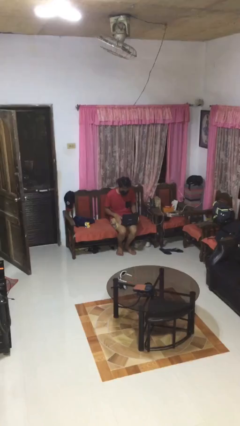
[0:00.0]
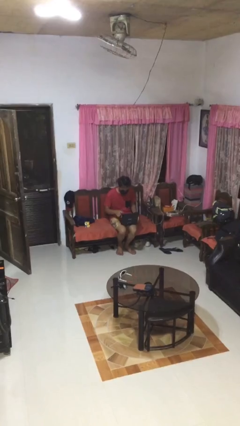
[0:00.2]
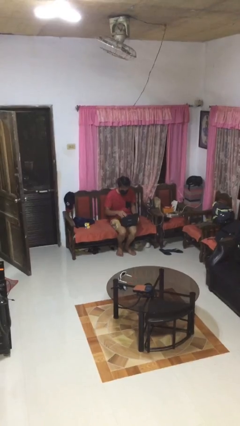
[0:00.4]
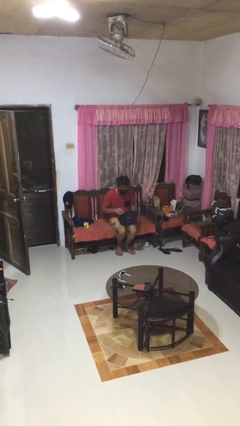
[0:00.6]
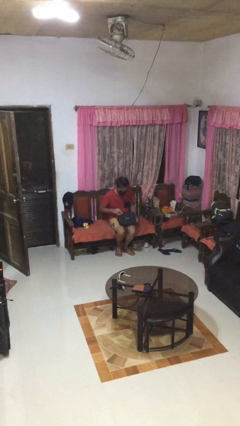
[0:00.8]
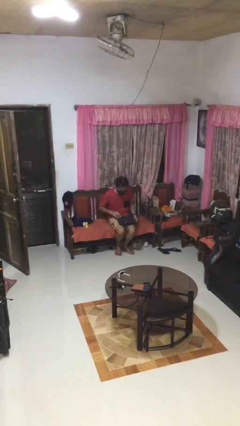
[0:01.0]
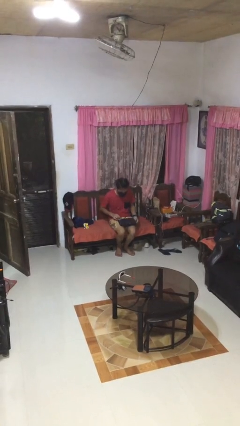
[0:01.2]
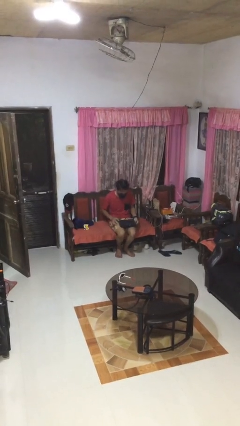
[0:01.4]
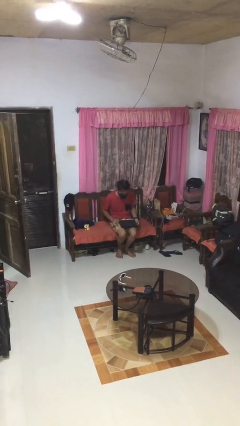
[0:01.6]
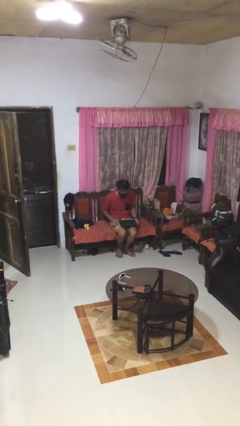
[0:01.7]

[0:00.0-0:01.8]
person closes laptop

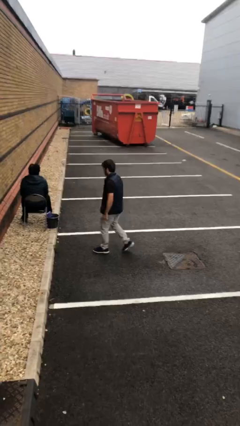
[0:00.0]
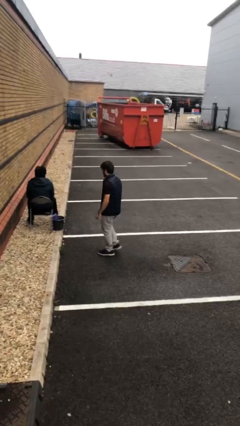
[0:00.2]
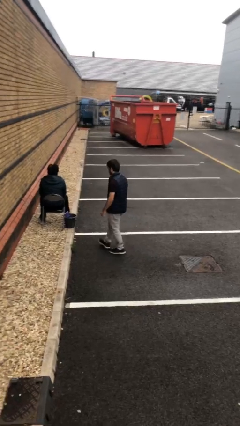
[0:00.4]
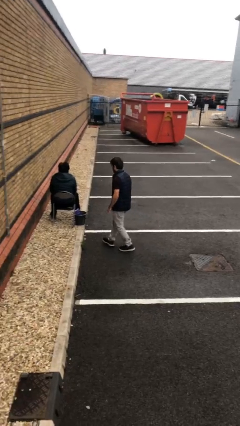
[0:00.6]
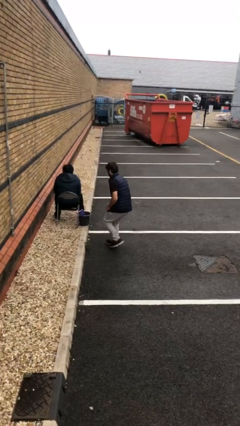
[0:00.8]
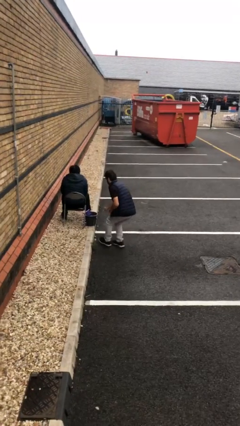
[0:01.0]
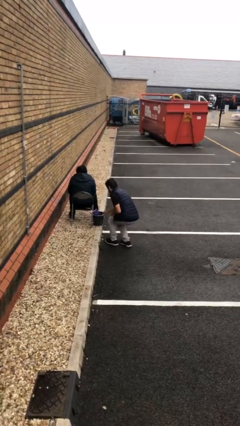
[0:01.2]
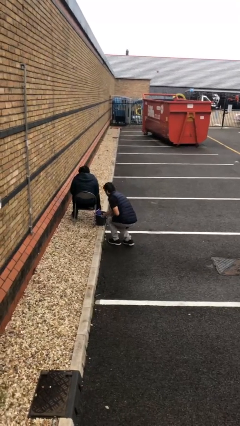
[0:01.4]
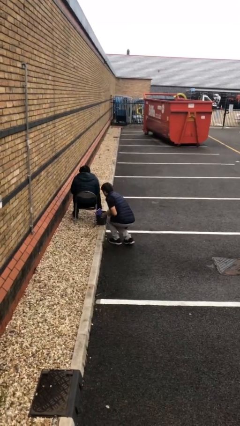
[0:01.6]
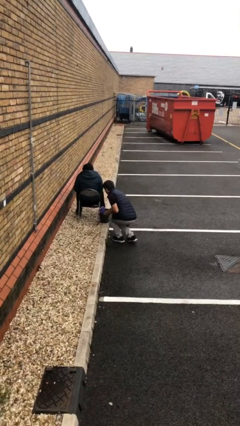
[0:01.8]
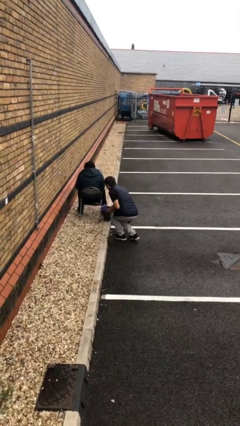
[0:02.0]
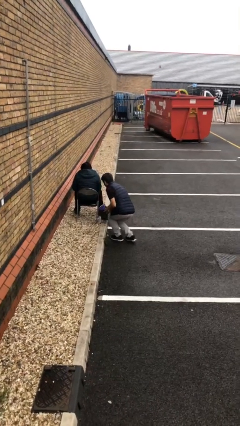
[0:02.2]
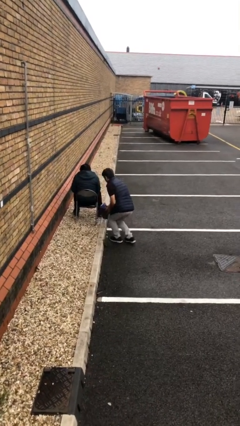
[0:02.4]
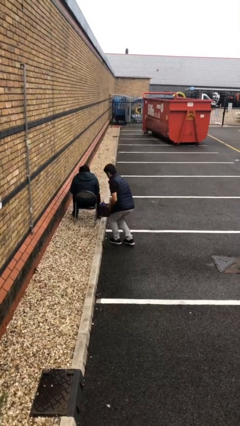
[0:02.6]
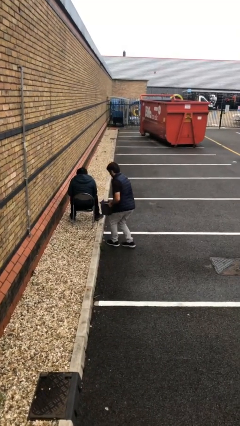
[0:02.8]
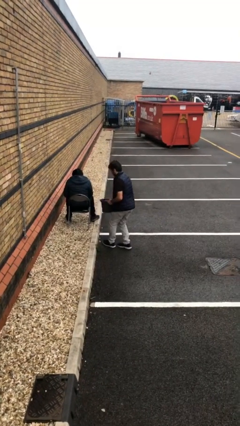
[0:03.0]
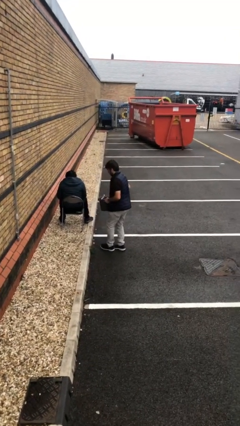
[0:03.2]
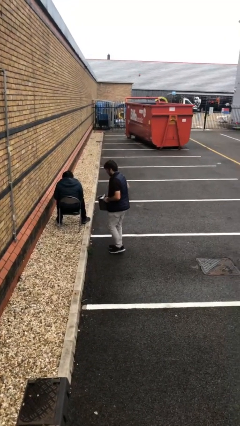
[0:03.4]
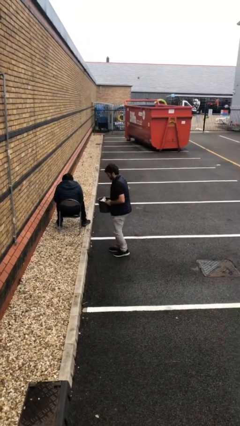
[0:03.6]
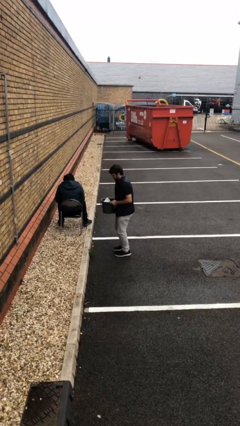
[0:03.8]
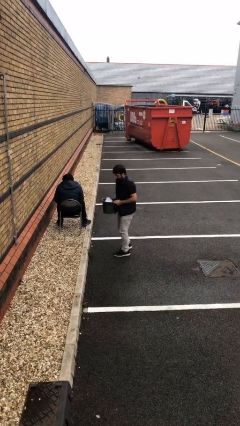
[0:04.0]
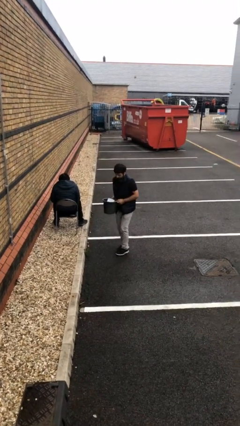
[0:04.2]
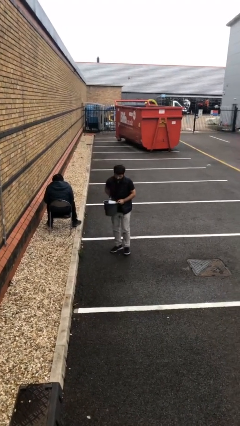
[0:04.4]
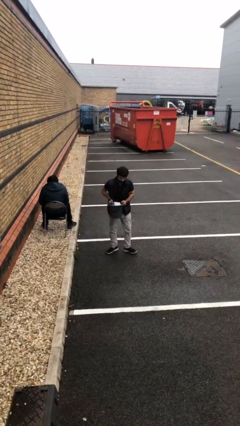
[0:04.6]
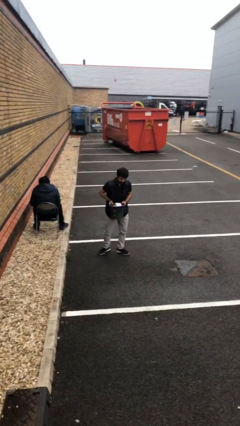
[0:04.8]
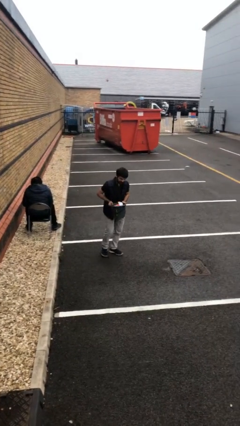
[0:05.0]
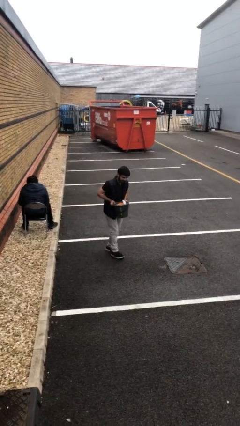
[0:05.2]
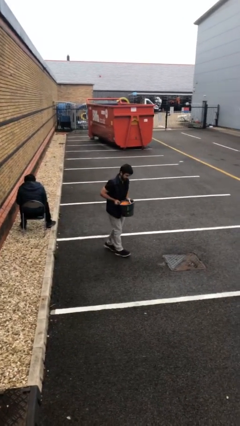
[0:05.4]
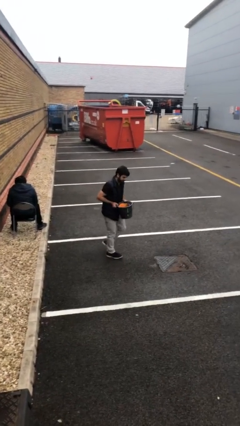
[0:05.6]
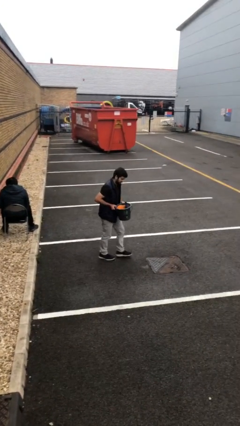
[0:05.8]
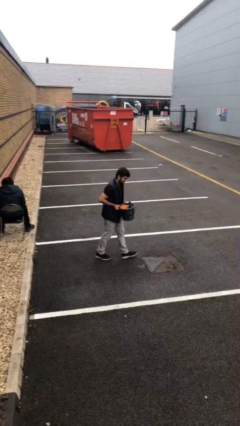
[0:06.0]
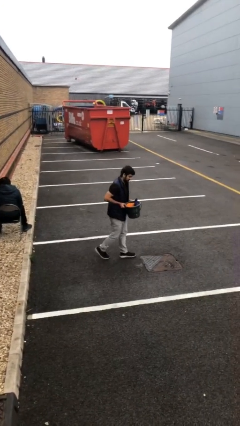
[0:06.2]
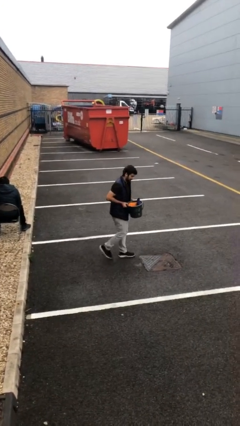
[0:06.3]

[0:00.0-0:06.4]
person steals object from person

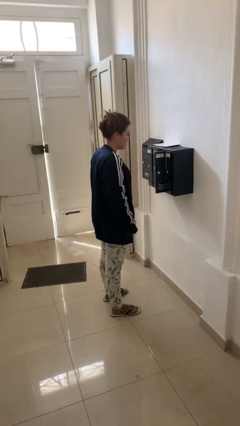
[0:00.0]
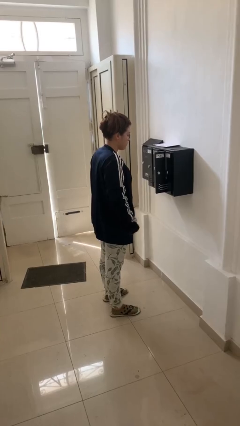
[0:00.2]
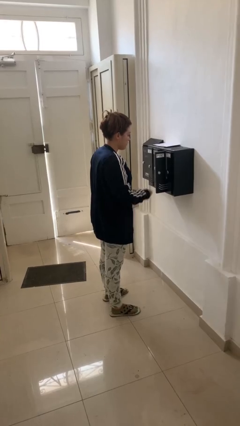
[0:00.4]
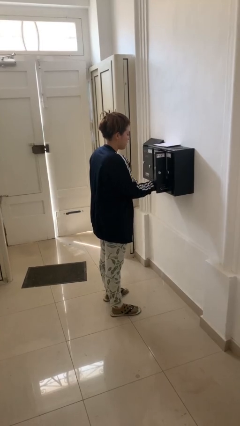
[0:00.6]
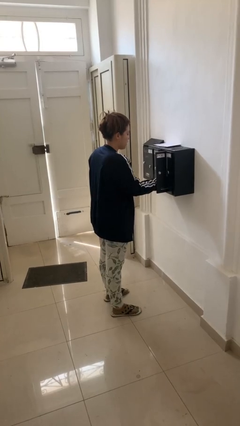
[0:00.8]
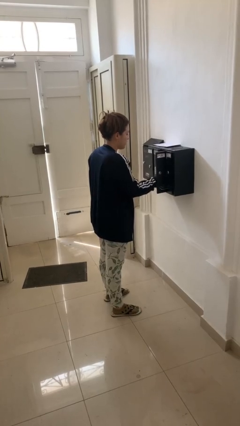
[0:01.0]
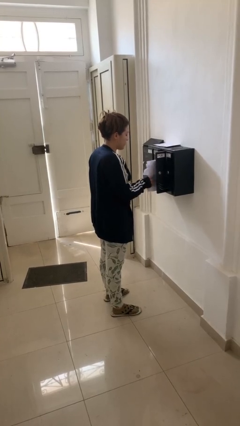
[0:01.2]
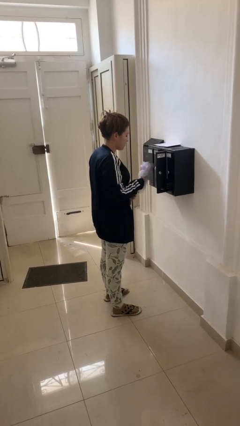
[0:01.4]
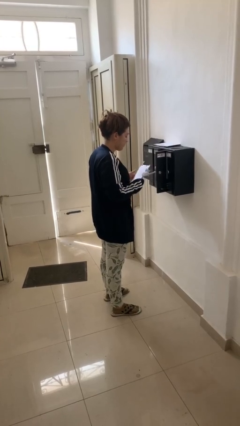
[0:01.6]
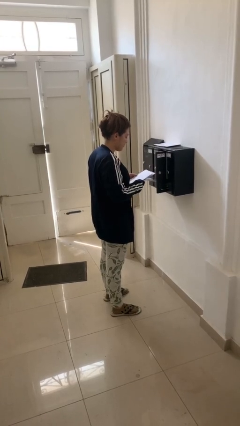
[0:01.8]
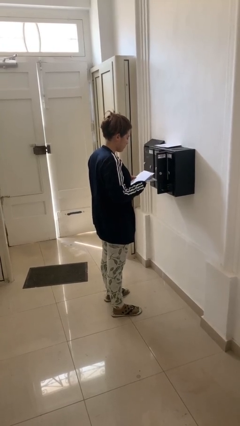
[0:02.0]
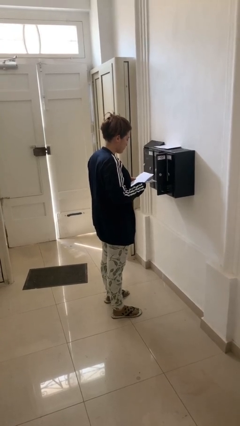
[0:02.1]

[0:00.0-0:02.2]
person takes letters from mailbox

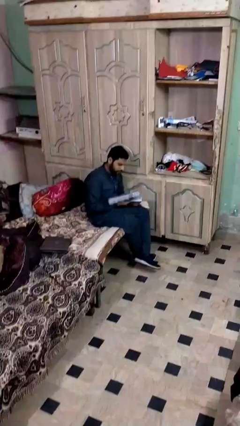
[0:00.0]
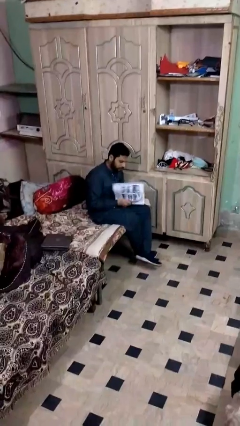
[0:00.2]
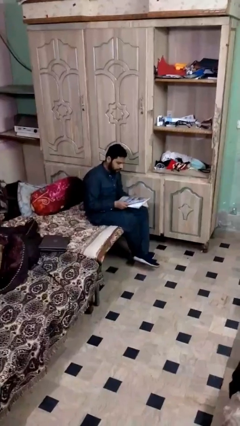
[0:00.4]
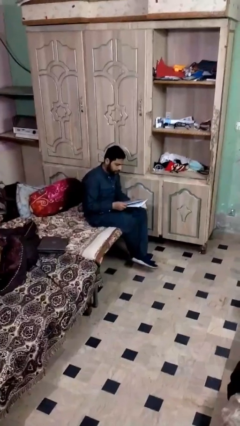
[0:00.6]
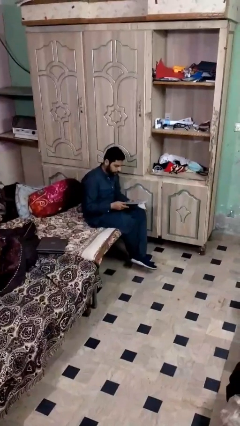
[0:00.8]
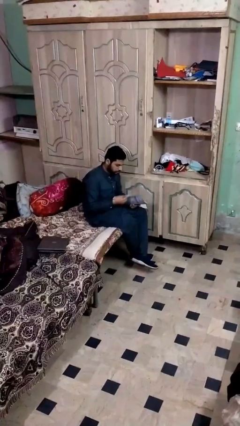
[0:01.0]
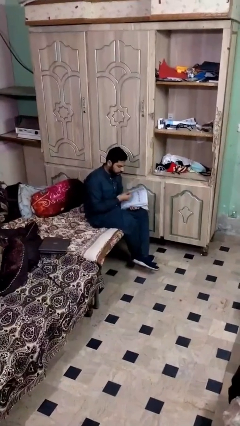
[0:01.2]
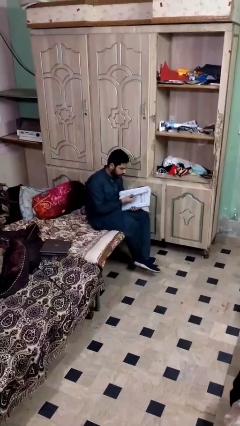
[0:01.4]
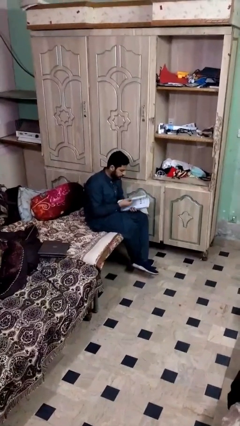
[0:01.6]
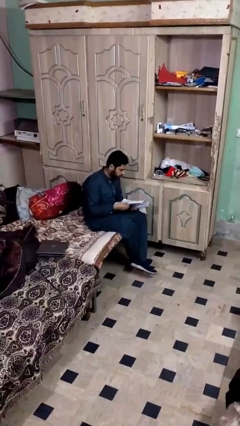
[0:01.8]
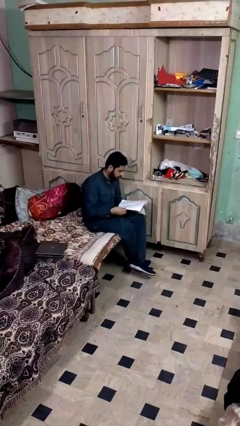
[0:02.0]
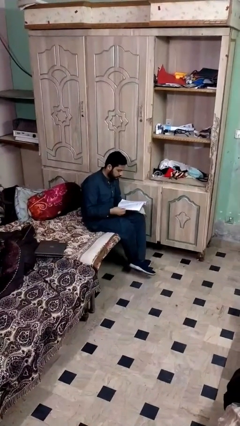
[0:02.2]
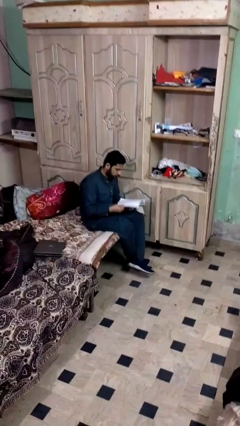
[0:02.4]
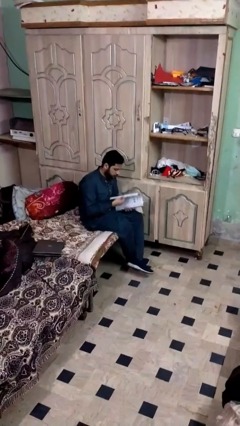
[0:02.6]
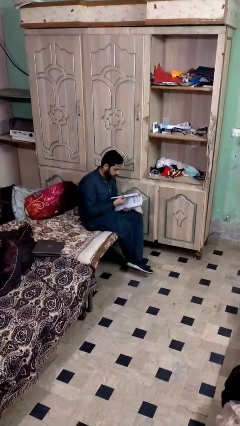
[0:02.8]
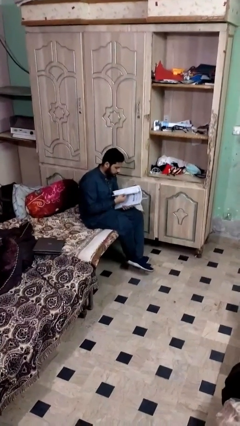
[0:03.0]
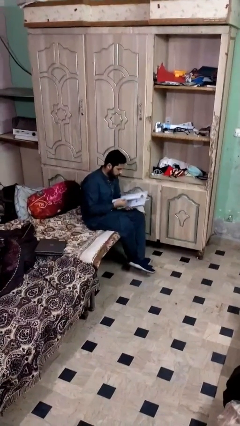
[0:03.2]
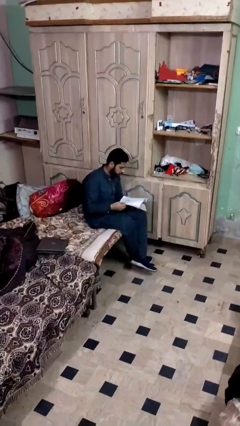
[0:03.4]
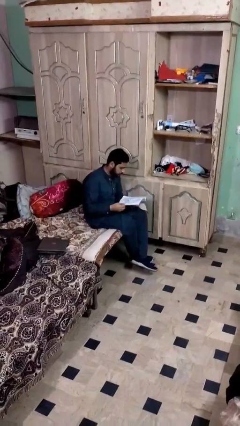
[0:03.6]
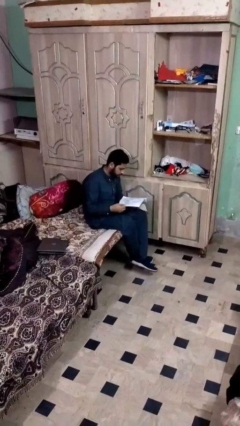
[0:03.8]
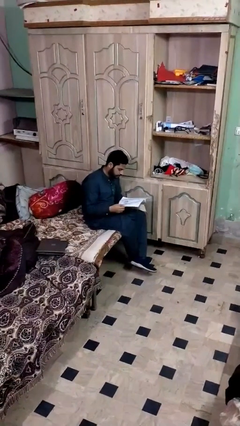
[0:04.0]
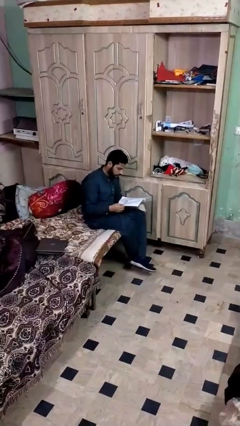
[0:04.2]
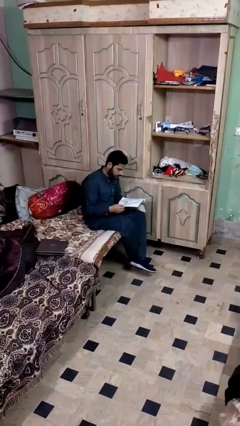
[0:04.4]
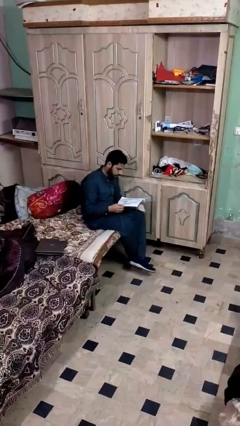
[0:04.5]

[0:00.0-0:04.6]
person reads document

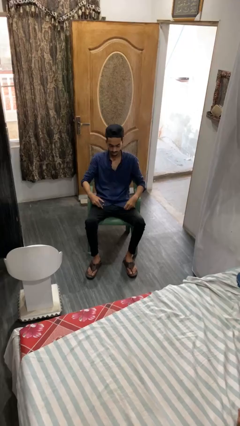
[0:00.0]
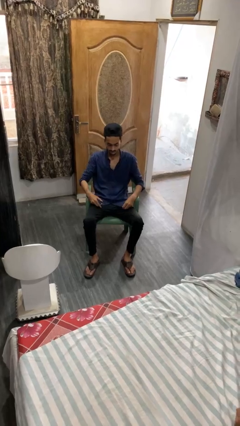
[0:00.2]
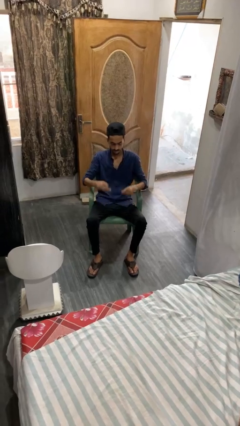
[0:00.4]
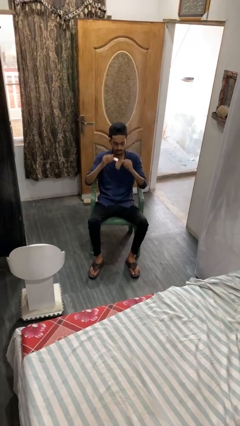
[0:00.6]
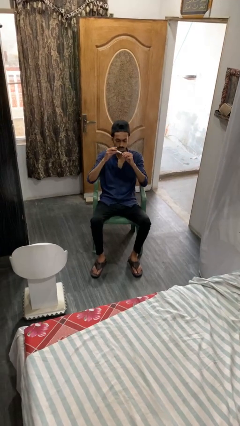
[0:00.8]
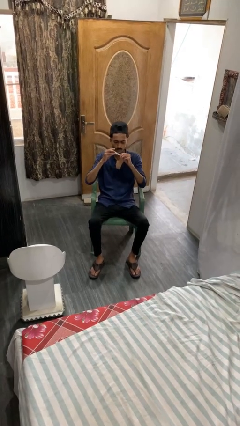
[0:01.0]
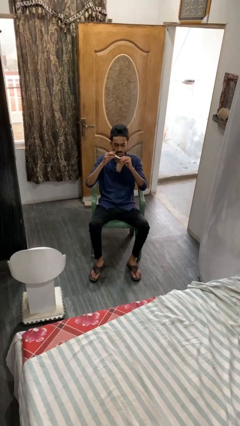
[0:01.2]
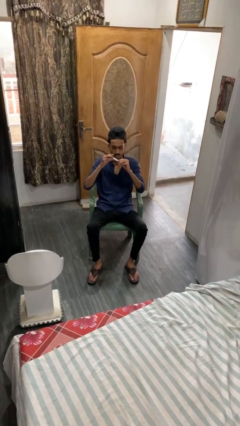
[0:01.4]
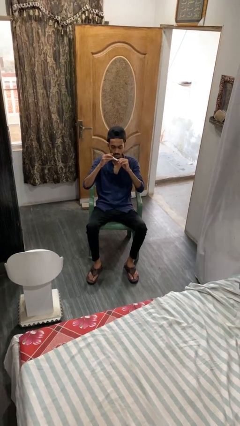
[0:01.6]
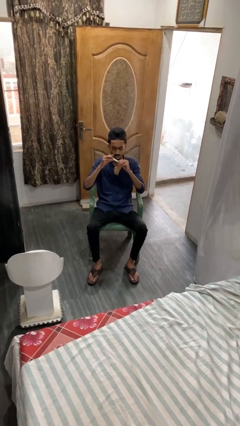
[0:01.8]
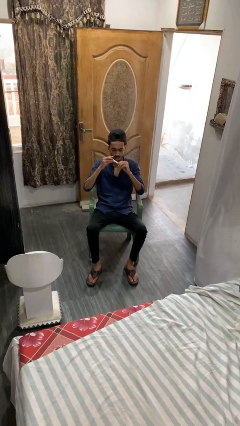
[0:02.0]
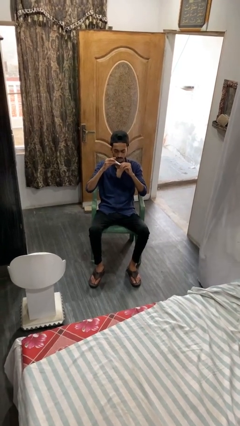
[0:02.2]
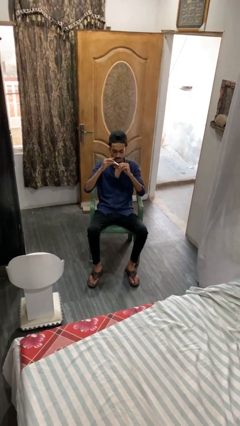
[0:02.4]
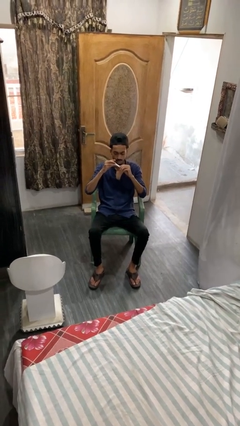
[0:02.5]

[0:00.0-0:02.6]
person clips fingernails
